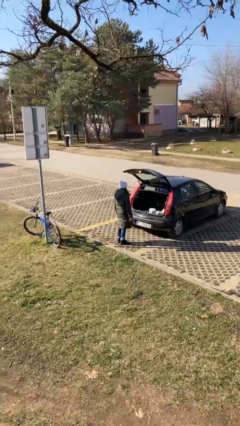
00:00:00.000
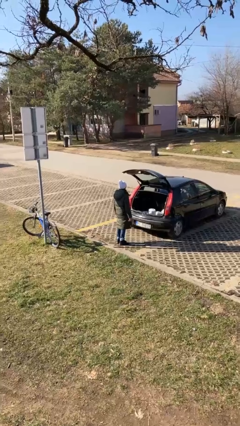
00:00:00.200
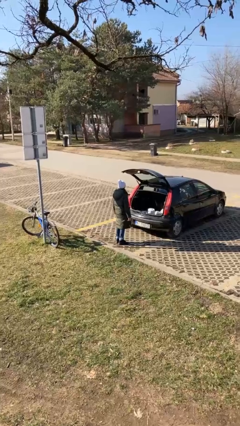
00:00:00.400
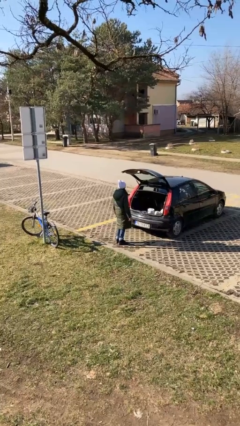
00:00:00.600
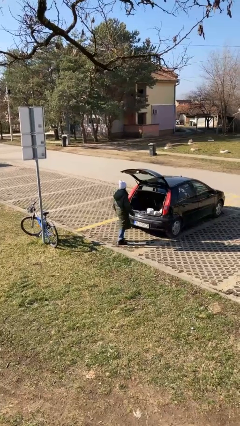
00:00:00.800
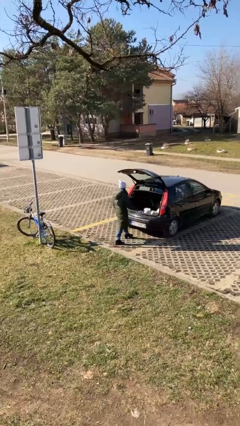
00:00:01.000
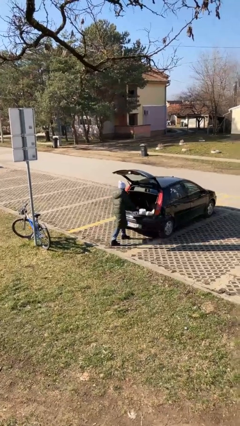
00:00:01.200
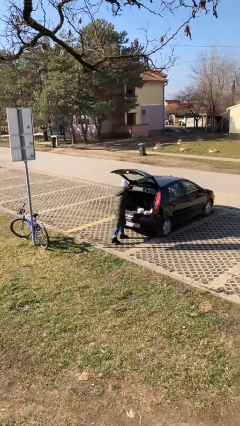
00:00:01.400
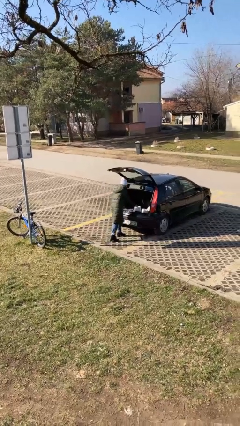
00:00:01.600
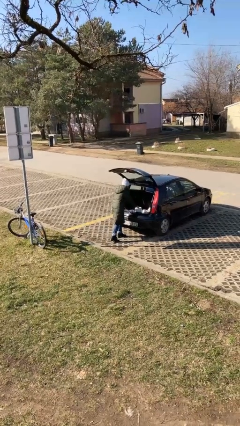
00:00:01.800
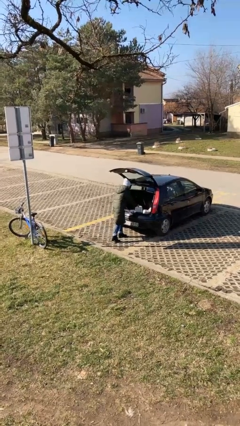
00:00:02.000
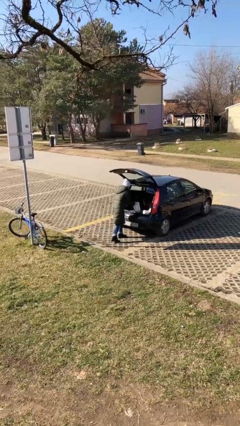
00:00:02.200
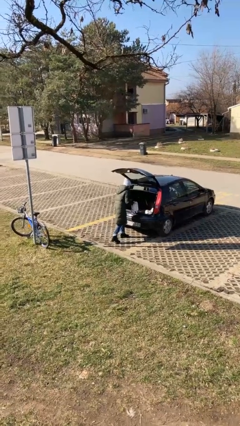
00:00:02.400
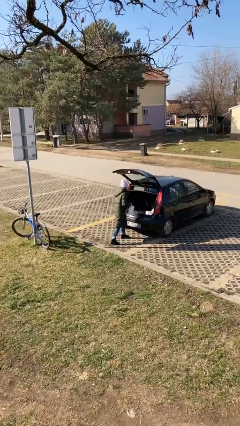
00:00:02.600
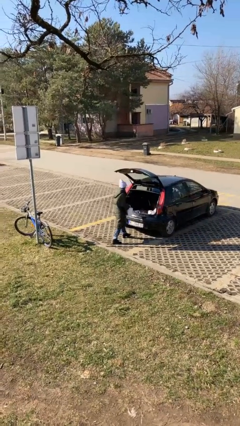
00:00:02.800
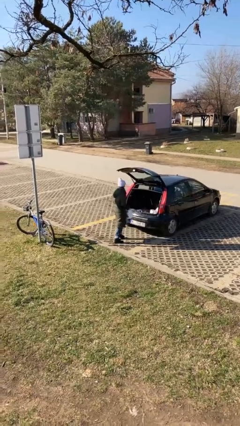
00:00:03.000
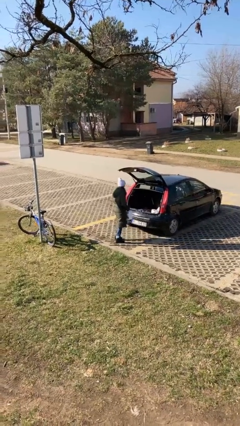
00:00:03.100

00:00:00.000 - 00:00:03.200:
person unloads car

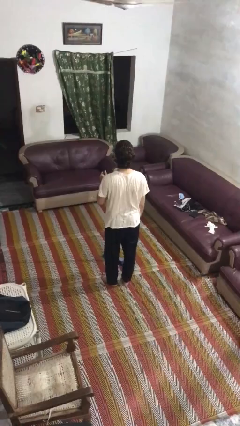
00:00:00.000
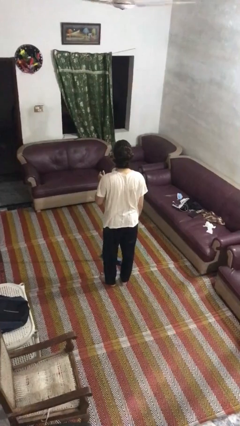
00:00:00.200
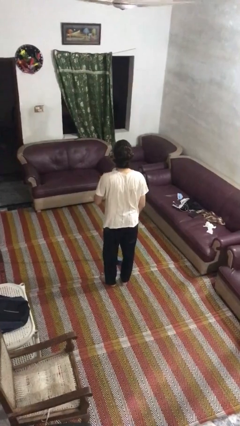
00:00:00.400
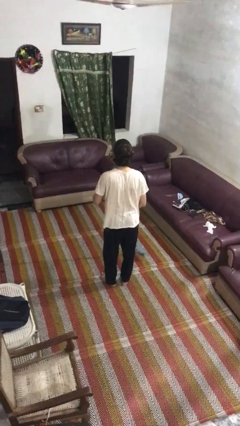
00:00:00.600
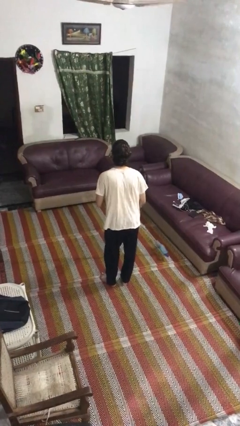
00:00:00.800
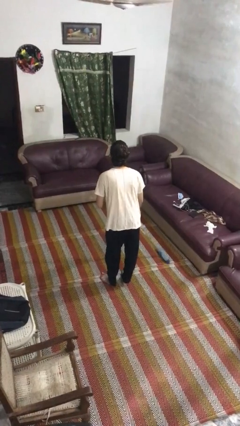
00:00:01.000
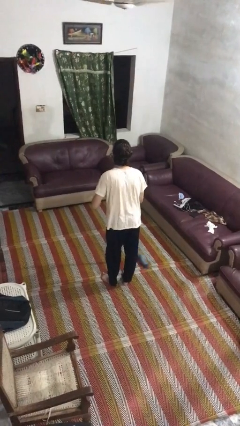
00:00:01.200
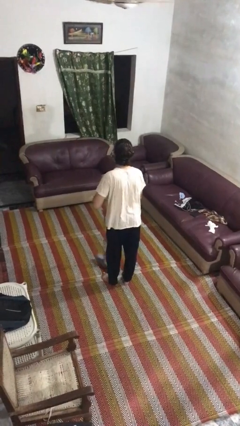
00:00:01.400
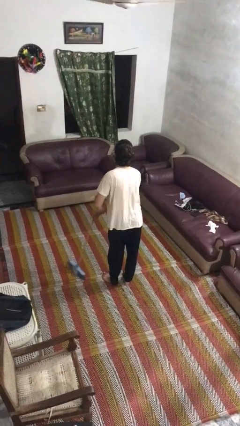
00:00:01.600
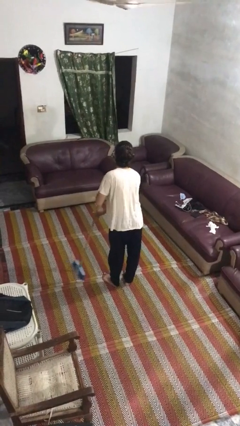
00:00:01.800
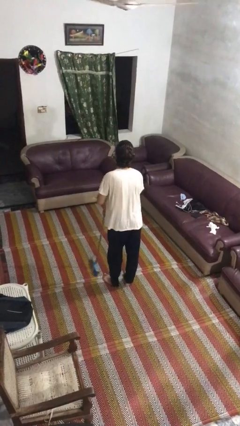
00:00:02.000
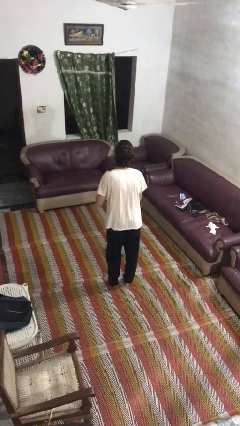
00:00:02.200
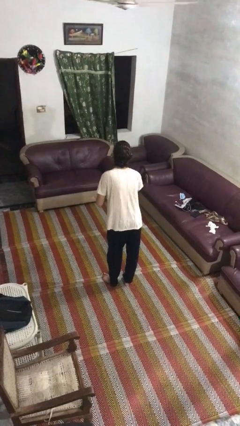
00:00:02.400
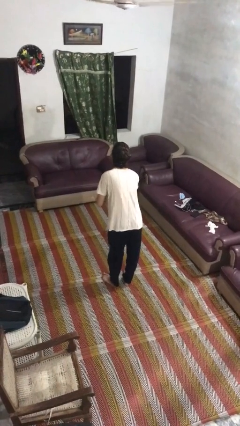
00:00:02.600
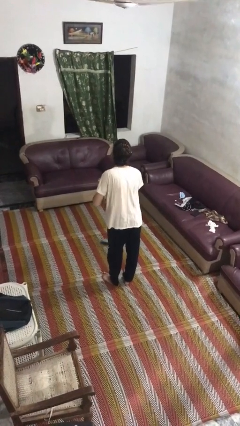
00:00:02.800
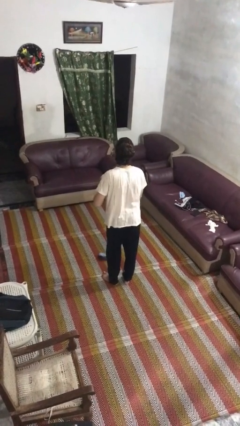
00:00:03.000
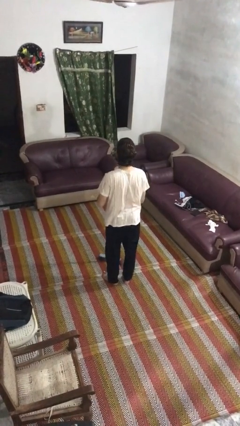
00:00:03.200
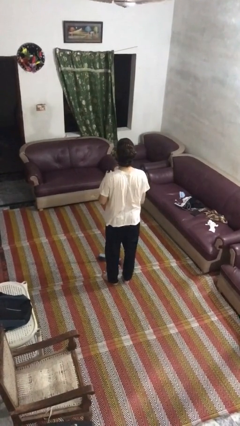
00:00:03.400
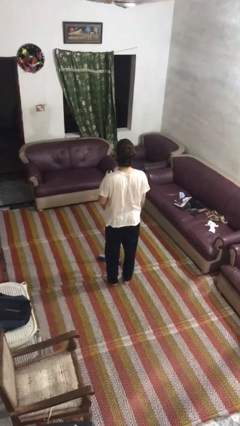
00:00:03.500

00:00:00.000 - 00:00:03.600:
person sweeps floor

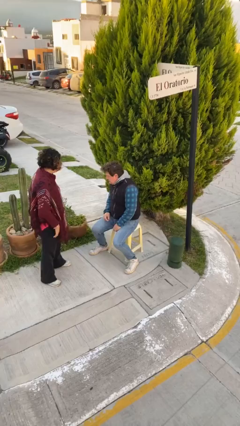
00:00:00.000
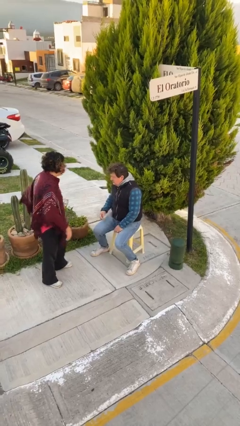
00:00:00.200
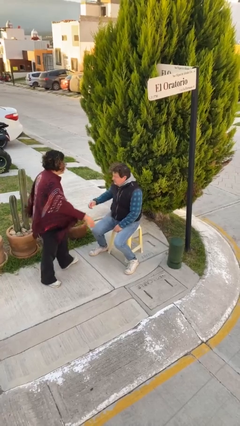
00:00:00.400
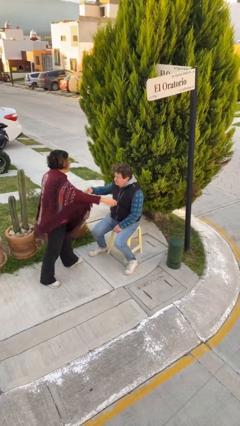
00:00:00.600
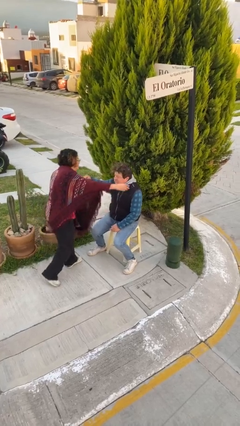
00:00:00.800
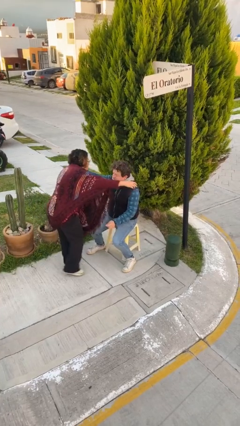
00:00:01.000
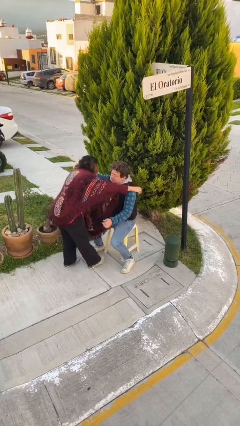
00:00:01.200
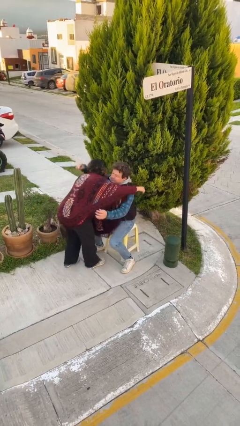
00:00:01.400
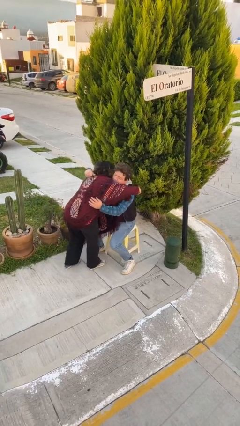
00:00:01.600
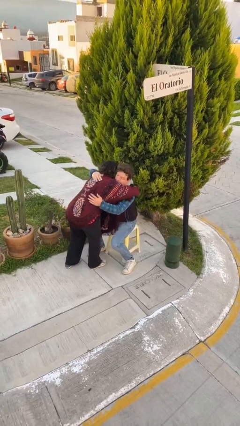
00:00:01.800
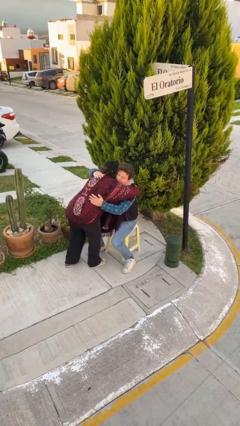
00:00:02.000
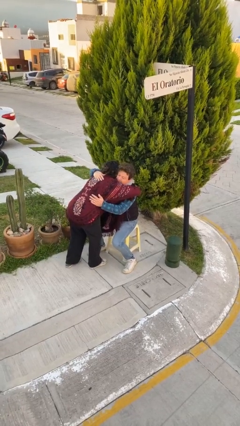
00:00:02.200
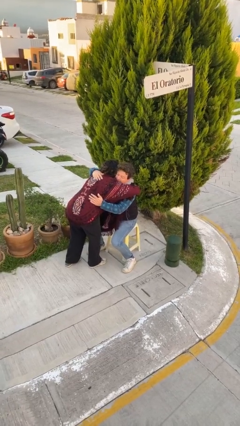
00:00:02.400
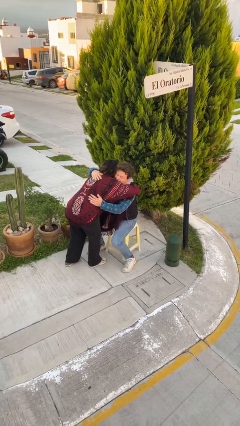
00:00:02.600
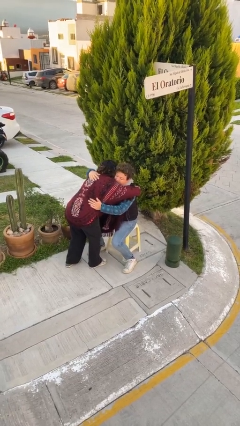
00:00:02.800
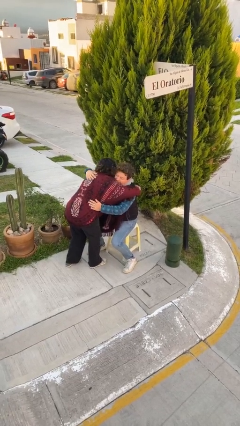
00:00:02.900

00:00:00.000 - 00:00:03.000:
person embraces person

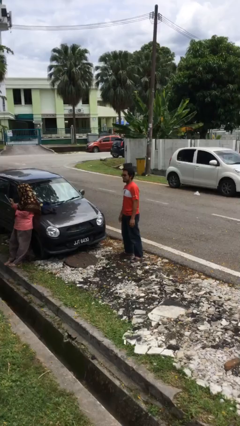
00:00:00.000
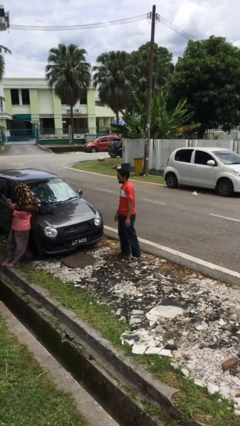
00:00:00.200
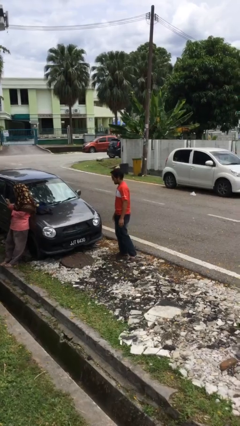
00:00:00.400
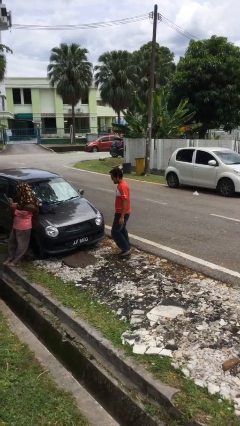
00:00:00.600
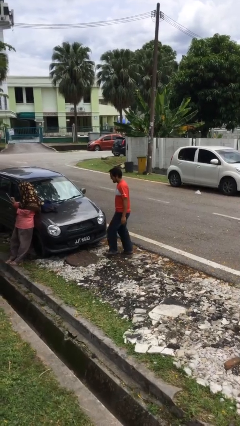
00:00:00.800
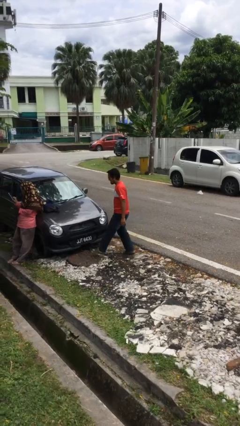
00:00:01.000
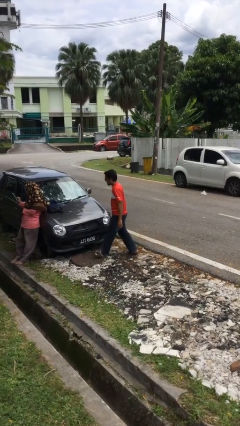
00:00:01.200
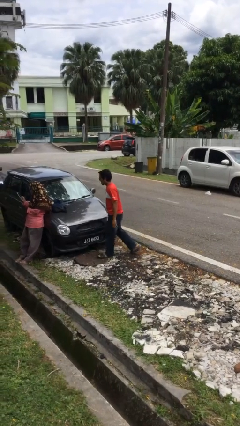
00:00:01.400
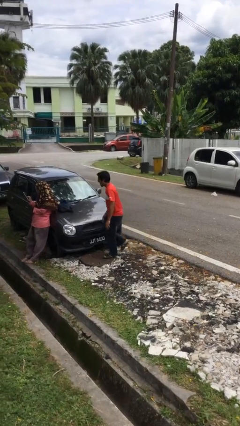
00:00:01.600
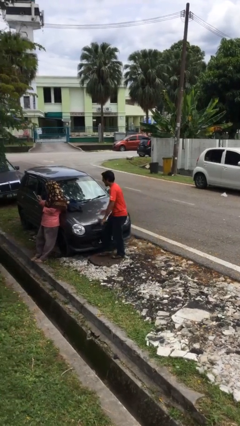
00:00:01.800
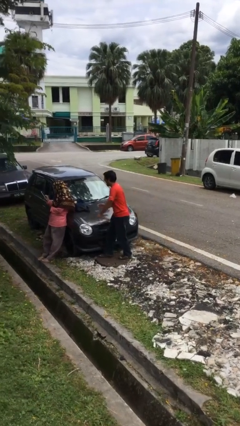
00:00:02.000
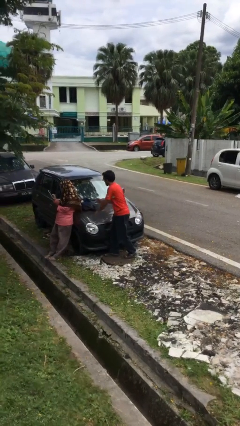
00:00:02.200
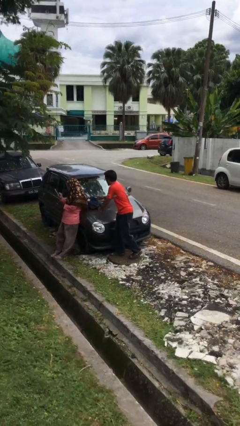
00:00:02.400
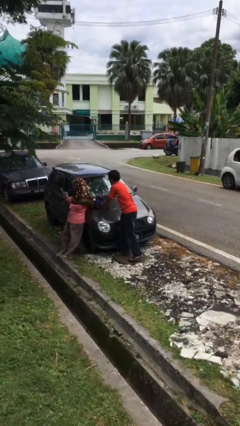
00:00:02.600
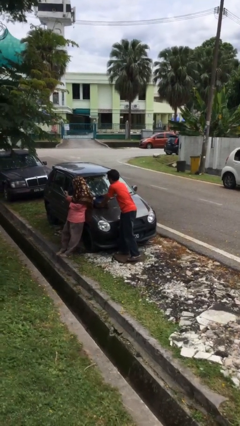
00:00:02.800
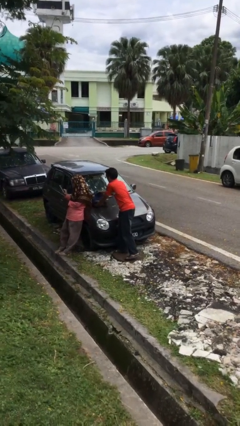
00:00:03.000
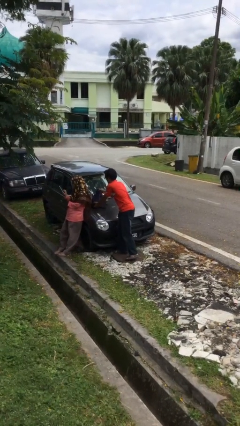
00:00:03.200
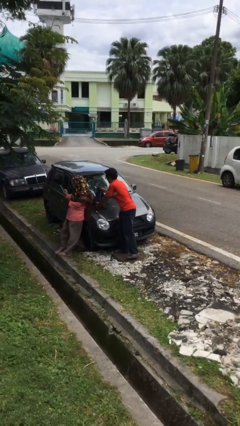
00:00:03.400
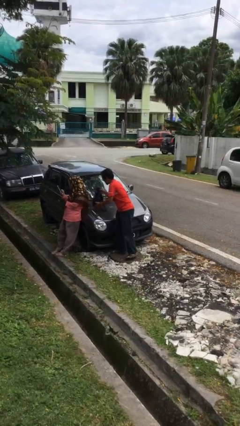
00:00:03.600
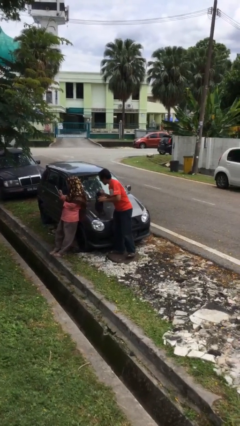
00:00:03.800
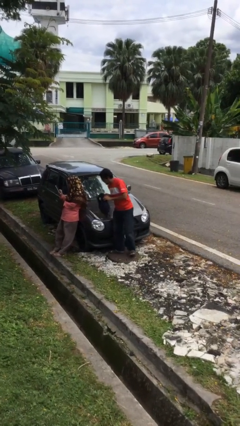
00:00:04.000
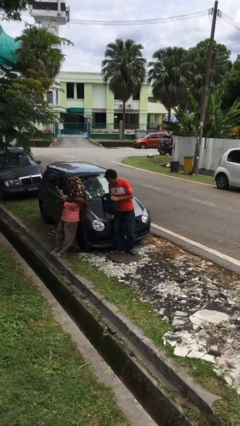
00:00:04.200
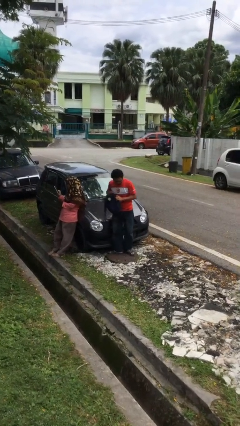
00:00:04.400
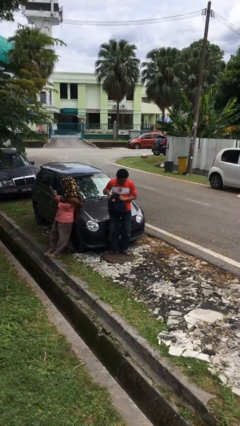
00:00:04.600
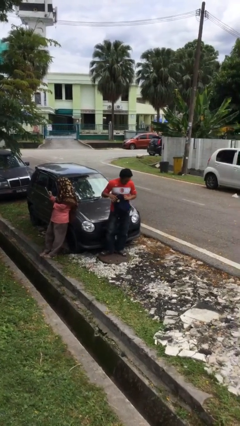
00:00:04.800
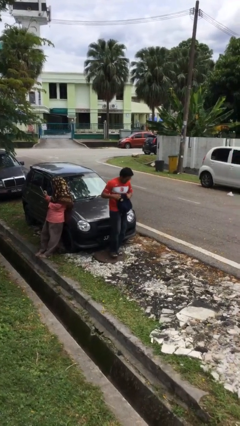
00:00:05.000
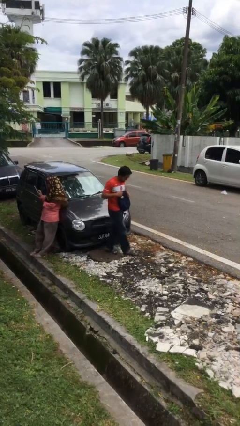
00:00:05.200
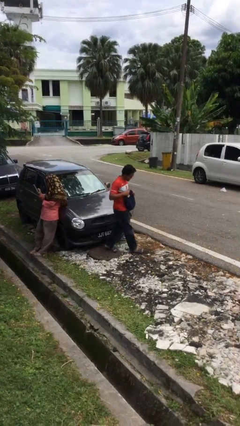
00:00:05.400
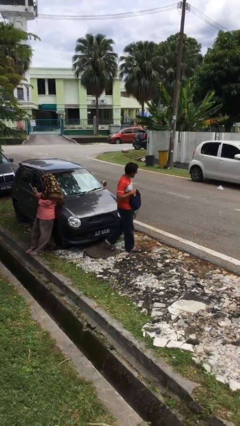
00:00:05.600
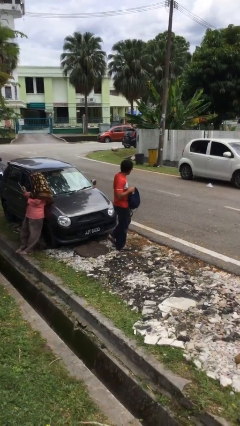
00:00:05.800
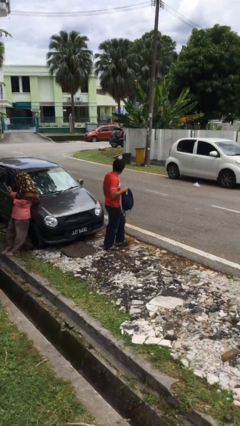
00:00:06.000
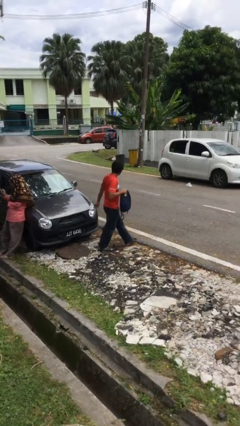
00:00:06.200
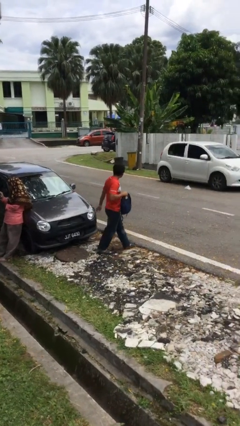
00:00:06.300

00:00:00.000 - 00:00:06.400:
person steals object from person

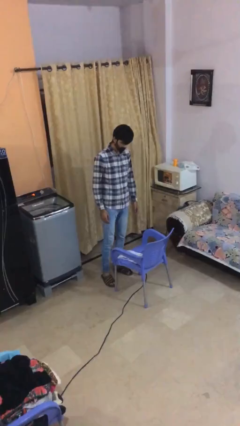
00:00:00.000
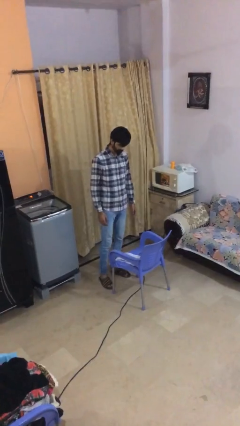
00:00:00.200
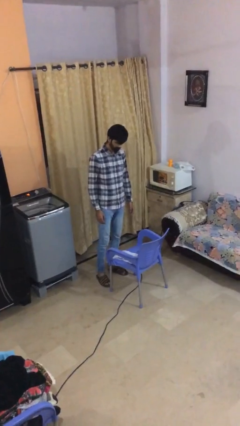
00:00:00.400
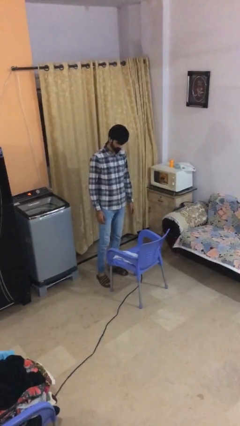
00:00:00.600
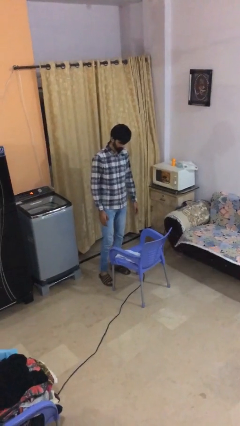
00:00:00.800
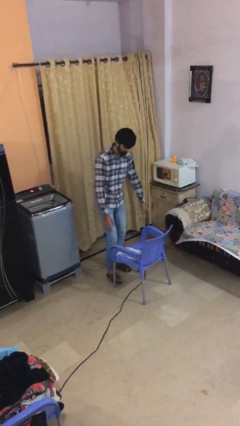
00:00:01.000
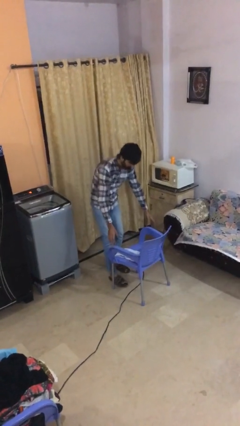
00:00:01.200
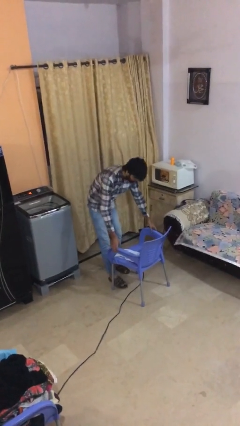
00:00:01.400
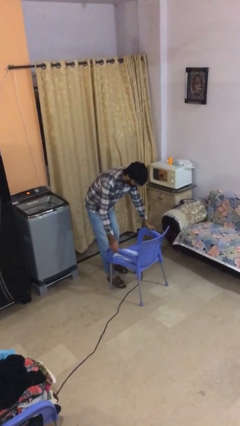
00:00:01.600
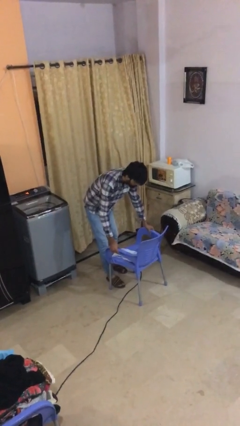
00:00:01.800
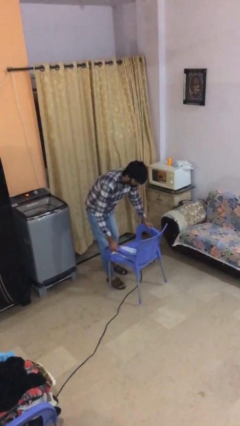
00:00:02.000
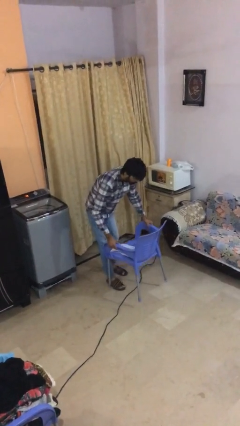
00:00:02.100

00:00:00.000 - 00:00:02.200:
person picks up object from floor
